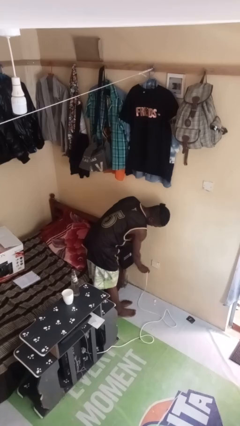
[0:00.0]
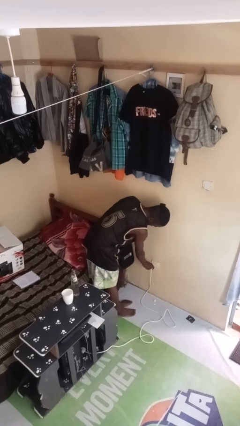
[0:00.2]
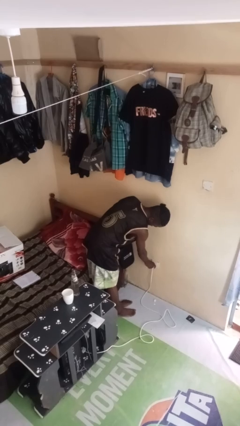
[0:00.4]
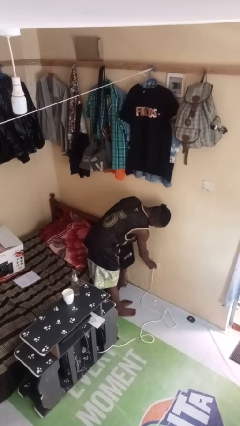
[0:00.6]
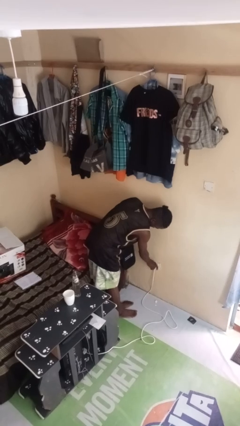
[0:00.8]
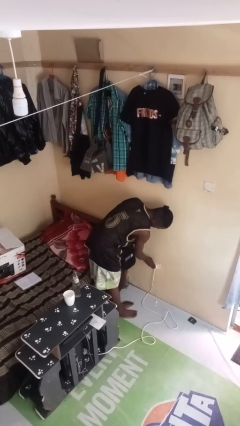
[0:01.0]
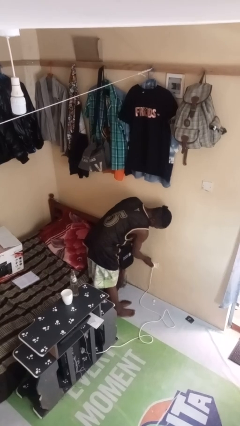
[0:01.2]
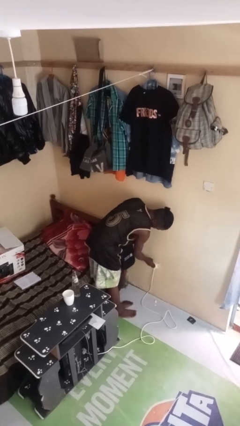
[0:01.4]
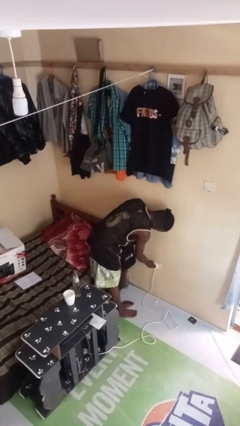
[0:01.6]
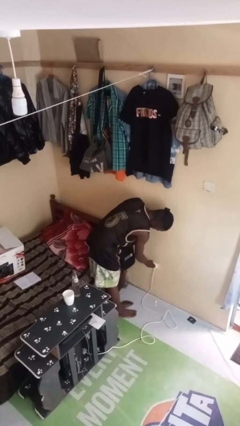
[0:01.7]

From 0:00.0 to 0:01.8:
person plugs into electrical socket

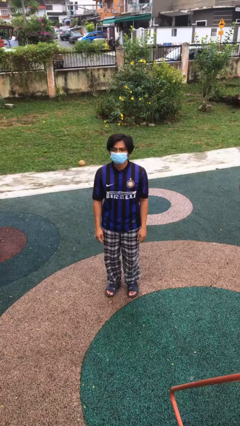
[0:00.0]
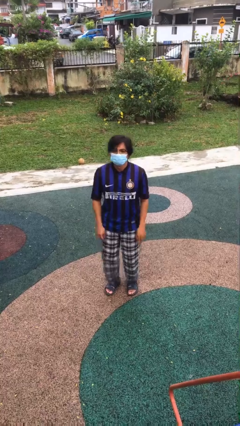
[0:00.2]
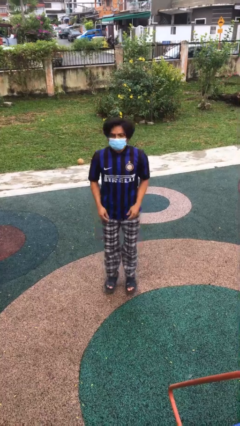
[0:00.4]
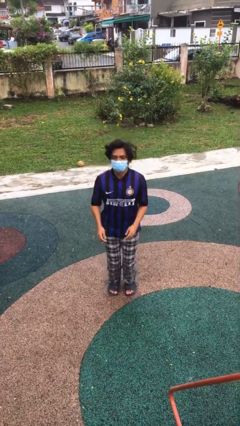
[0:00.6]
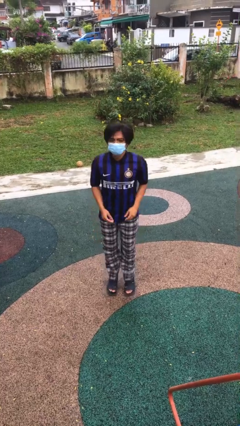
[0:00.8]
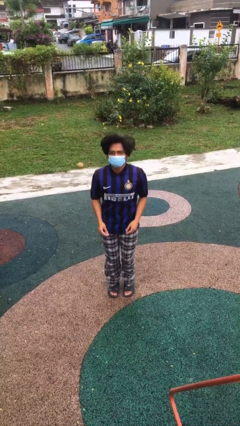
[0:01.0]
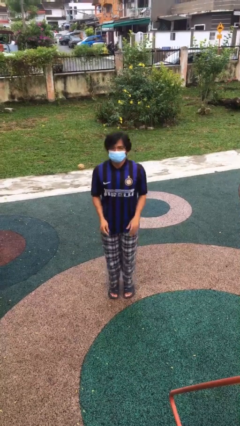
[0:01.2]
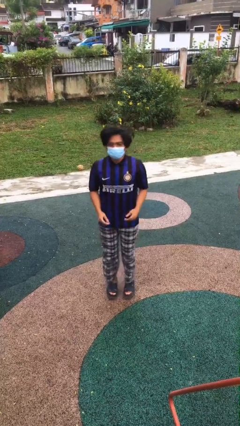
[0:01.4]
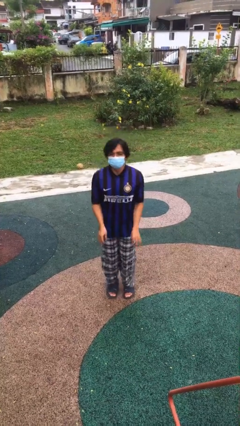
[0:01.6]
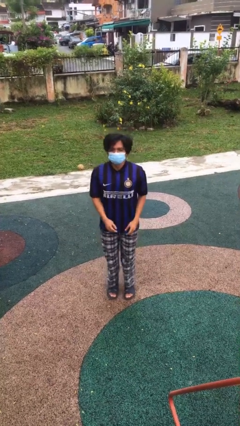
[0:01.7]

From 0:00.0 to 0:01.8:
person jumps

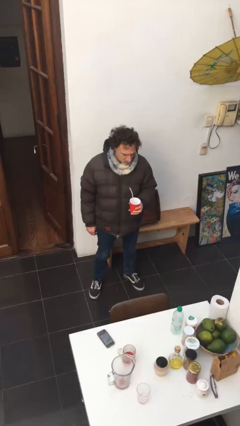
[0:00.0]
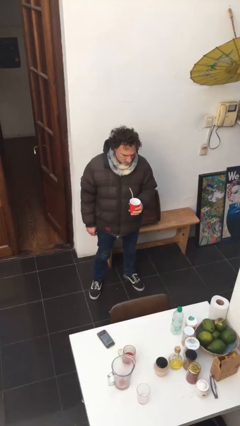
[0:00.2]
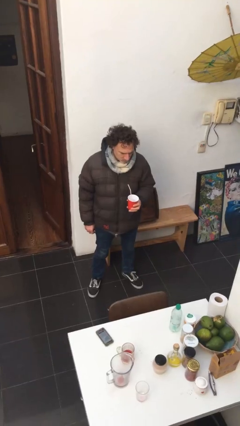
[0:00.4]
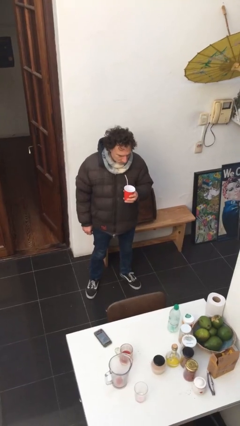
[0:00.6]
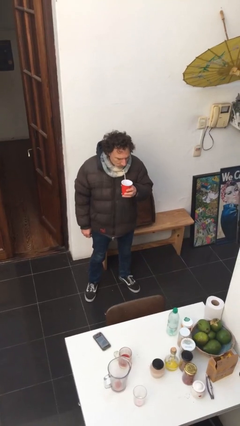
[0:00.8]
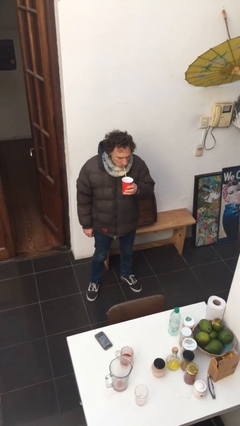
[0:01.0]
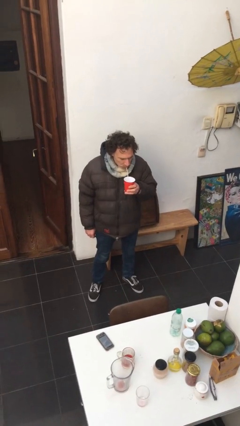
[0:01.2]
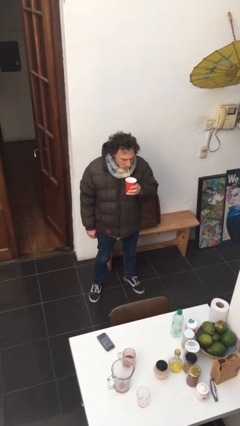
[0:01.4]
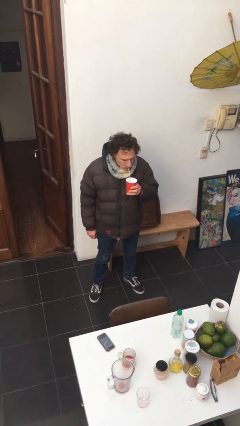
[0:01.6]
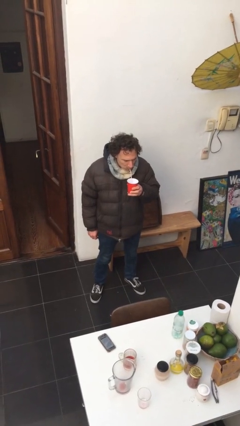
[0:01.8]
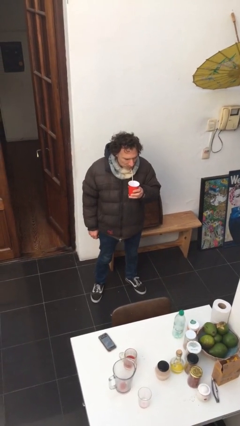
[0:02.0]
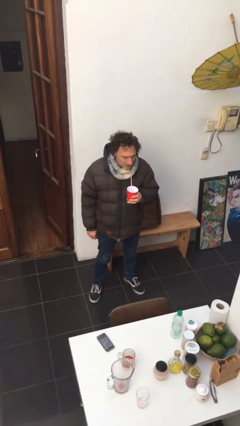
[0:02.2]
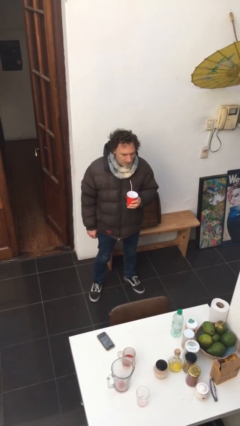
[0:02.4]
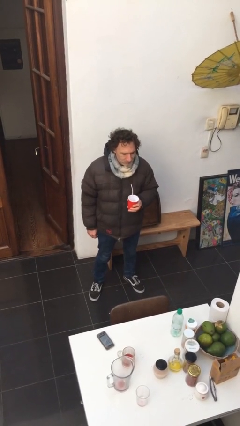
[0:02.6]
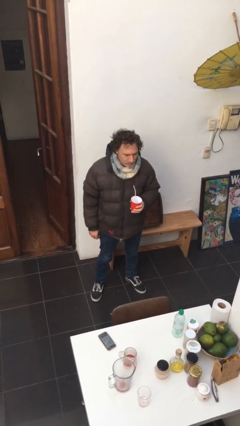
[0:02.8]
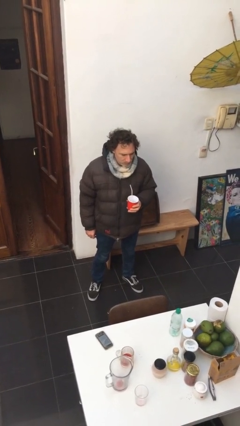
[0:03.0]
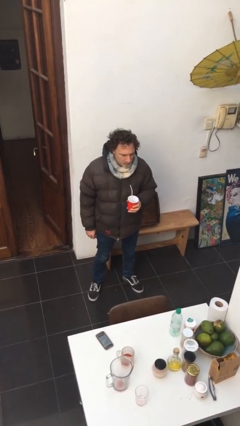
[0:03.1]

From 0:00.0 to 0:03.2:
person drinks from straw

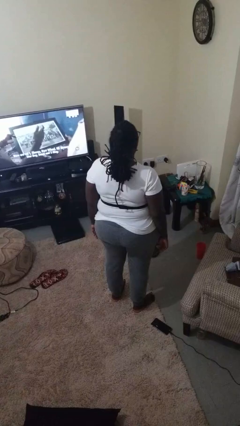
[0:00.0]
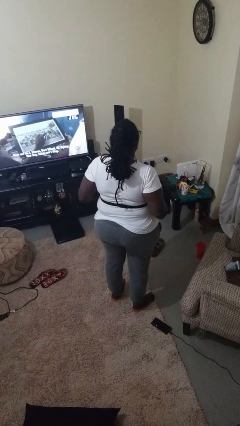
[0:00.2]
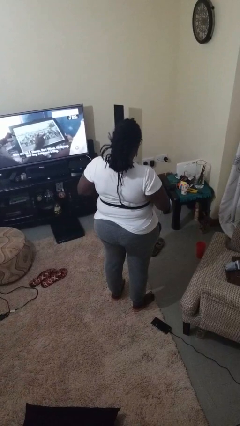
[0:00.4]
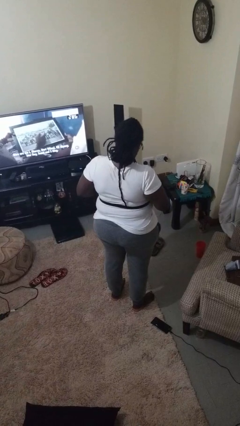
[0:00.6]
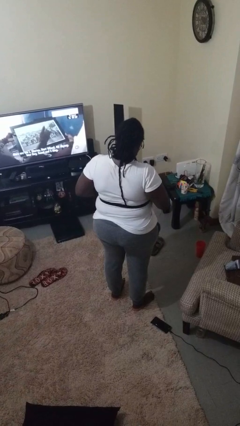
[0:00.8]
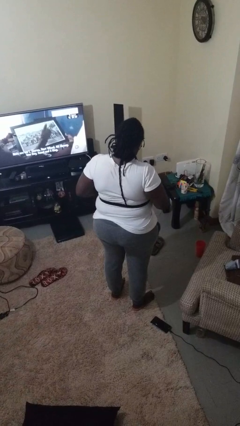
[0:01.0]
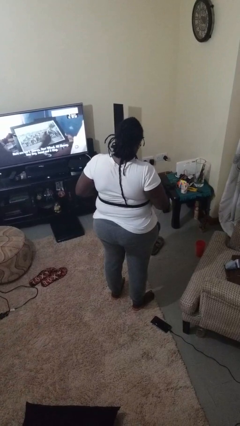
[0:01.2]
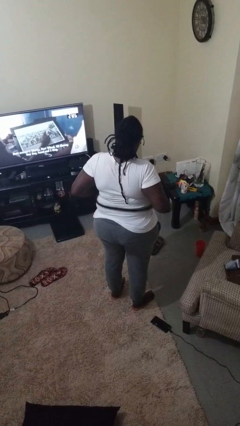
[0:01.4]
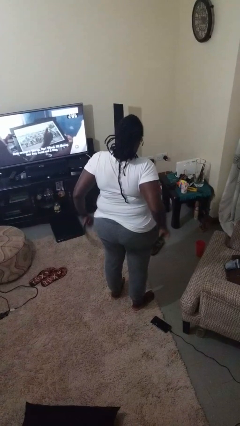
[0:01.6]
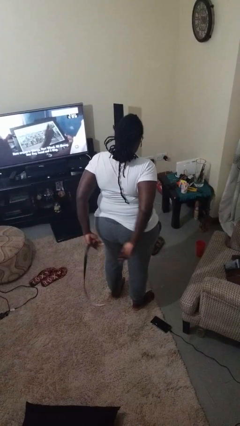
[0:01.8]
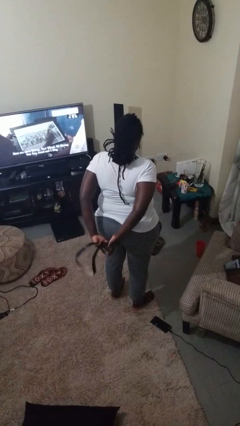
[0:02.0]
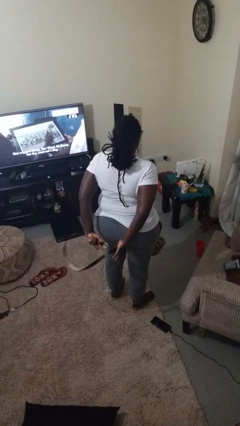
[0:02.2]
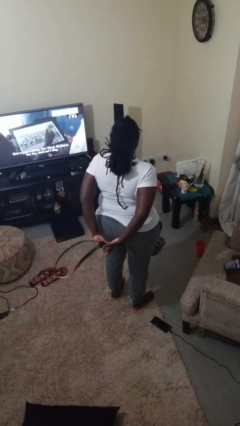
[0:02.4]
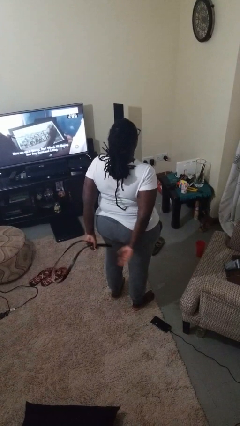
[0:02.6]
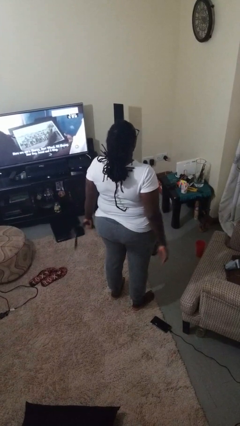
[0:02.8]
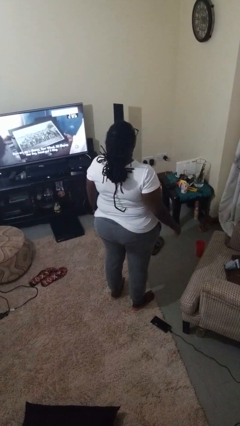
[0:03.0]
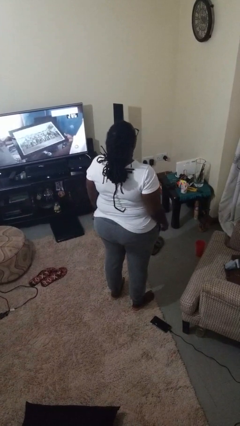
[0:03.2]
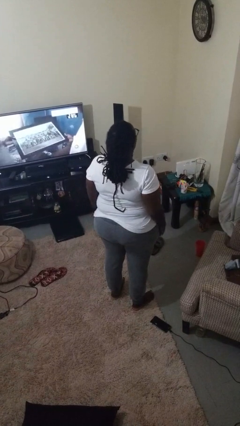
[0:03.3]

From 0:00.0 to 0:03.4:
person takes off belt

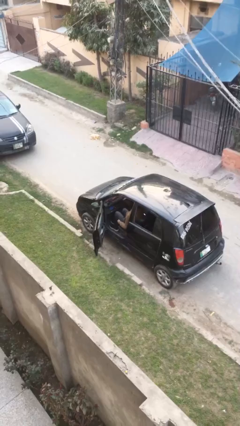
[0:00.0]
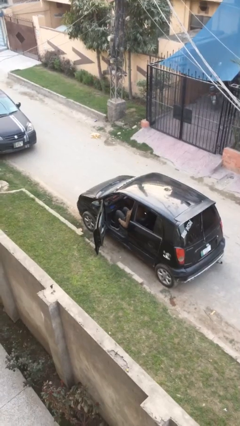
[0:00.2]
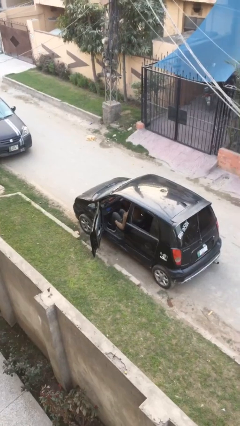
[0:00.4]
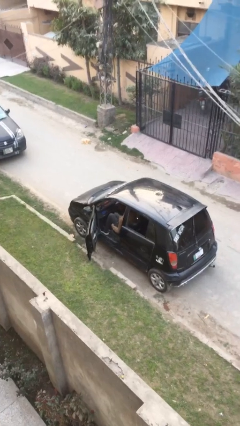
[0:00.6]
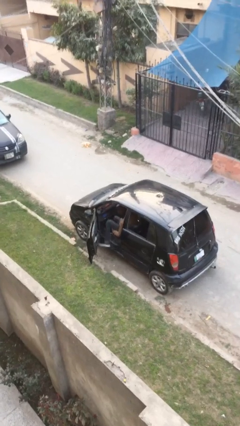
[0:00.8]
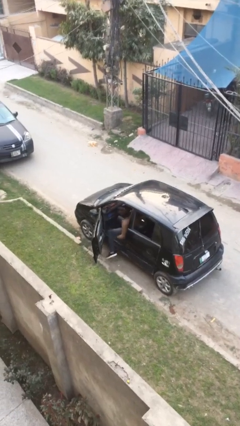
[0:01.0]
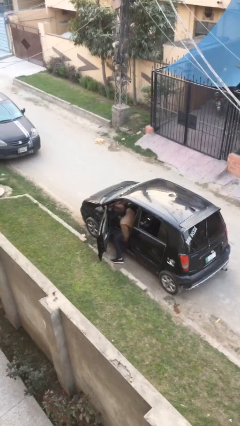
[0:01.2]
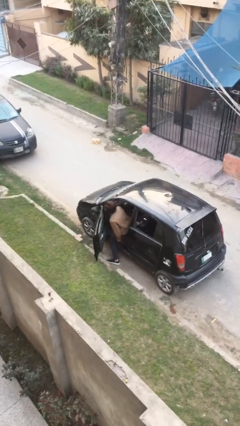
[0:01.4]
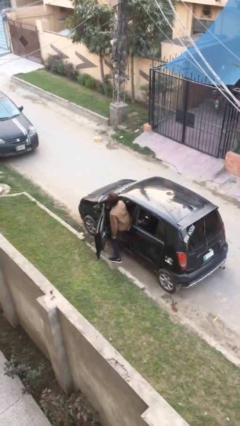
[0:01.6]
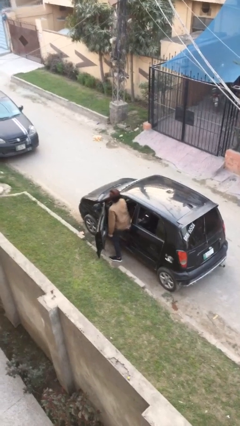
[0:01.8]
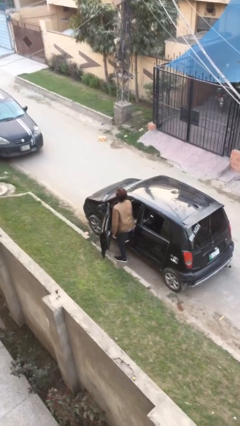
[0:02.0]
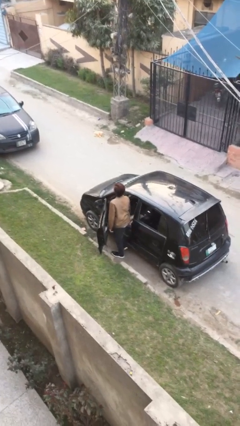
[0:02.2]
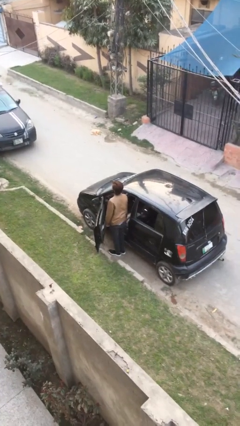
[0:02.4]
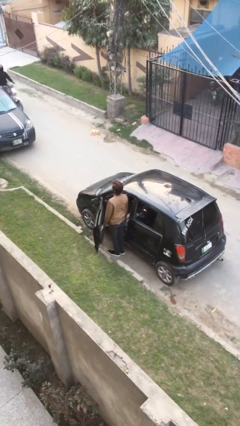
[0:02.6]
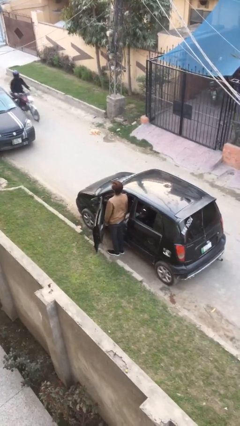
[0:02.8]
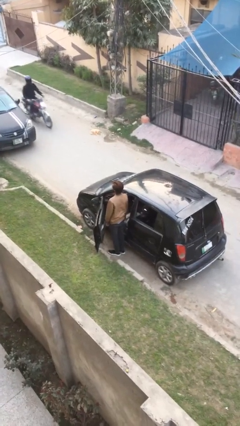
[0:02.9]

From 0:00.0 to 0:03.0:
person exits car

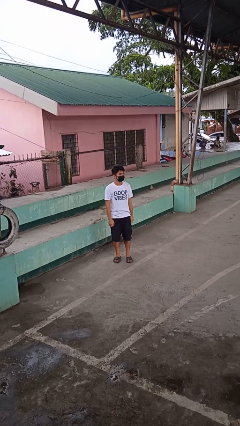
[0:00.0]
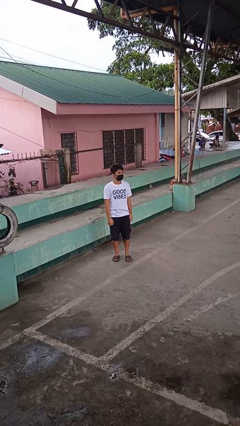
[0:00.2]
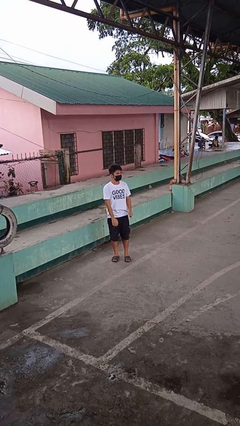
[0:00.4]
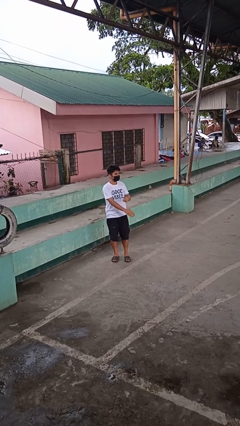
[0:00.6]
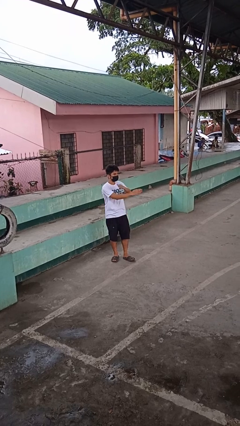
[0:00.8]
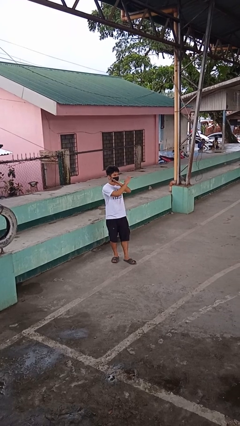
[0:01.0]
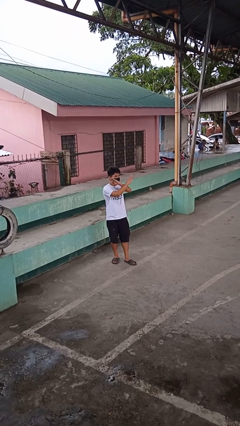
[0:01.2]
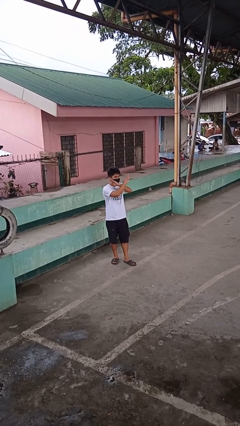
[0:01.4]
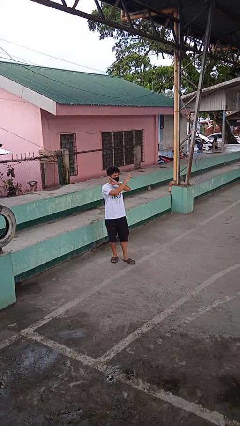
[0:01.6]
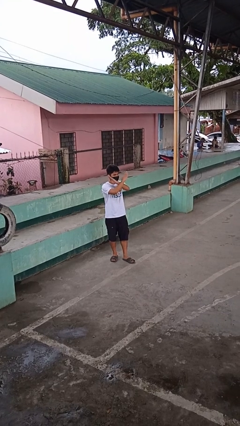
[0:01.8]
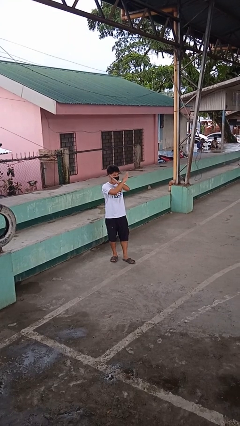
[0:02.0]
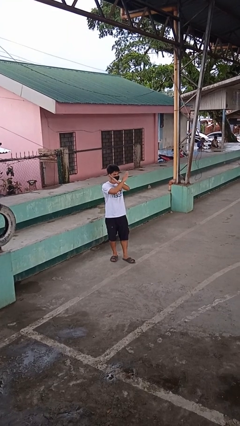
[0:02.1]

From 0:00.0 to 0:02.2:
person gestures arms x

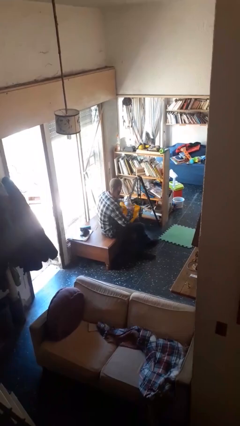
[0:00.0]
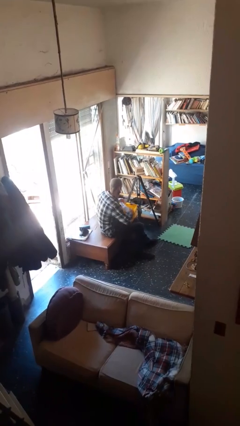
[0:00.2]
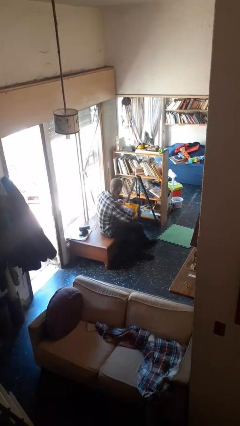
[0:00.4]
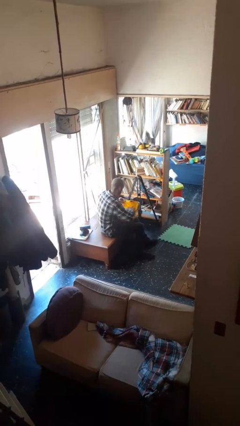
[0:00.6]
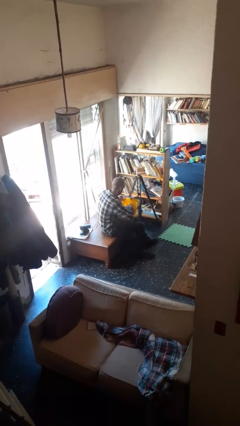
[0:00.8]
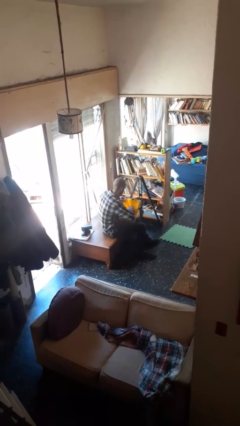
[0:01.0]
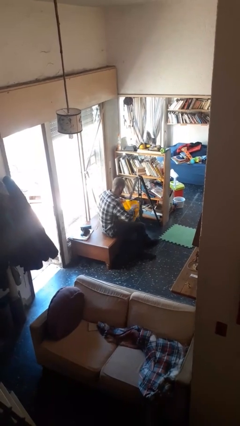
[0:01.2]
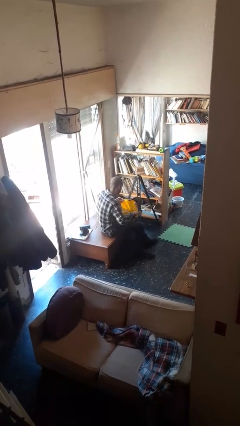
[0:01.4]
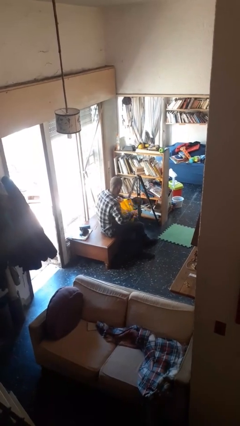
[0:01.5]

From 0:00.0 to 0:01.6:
person puts object into bag
